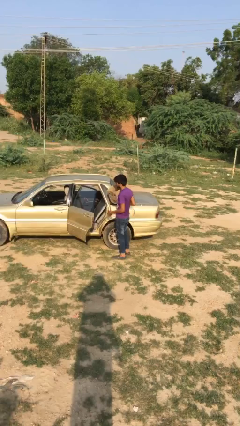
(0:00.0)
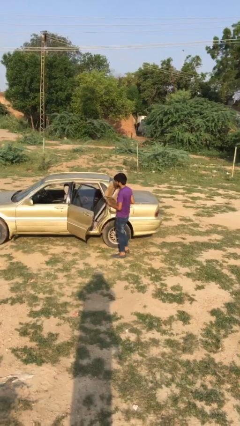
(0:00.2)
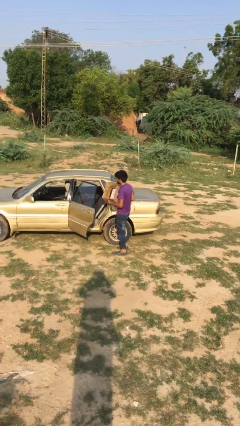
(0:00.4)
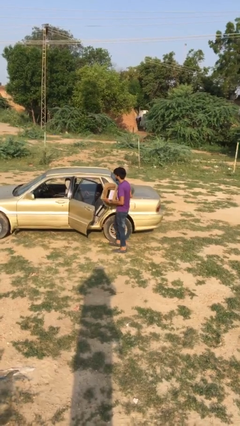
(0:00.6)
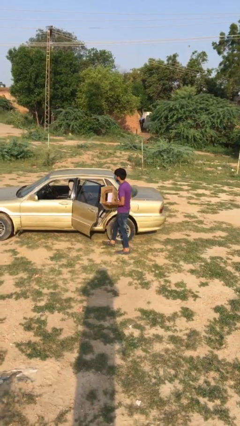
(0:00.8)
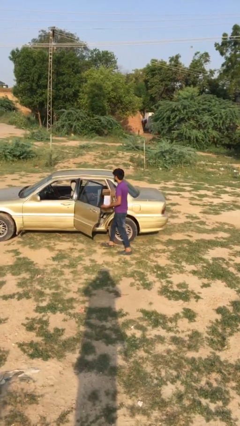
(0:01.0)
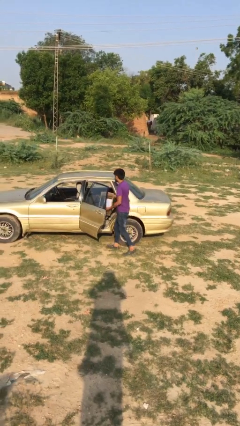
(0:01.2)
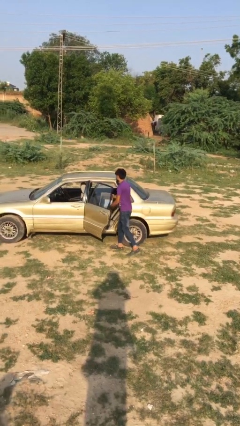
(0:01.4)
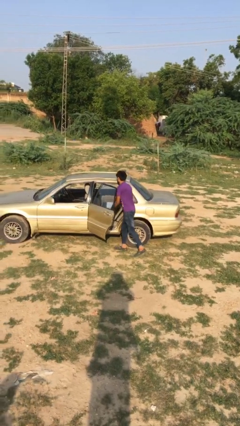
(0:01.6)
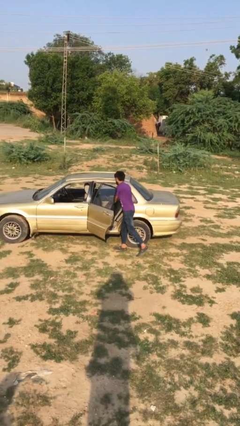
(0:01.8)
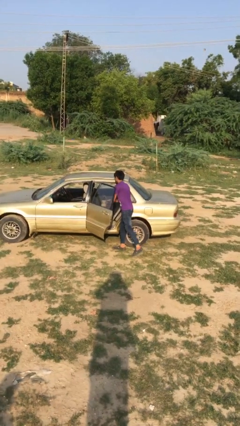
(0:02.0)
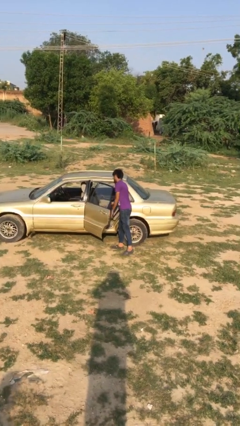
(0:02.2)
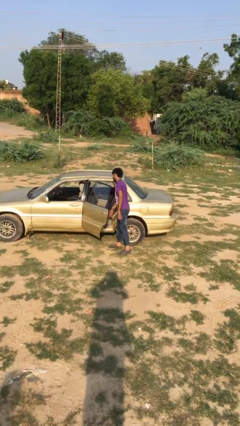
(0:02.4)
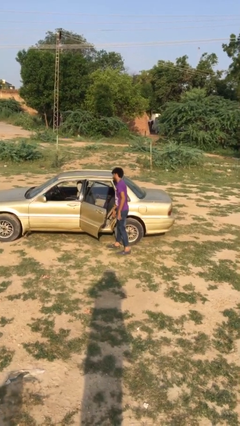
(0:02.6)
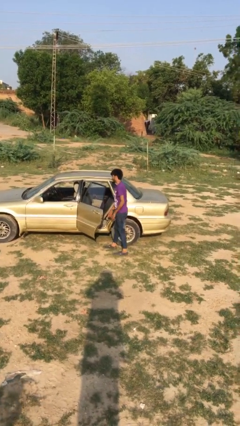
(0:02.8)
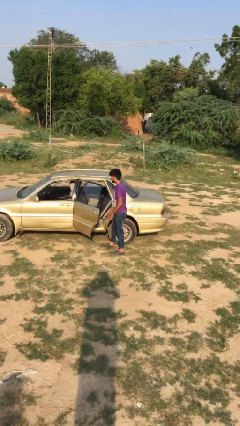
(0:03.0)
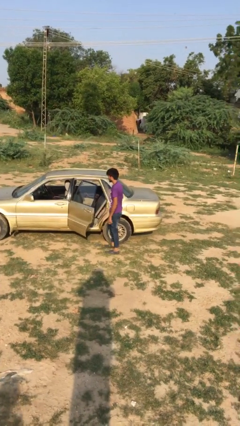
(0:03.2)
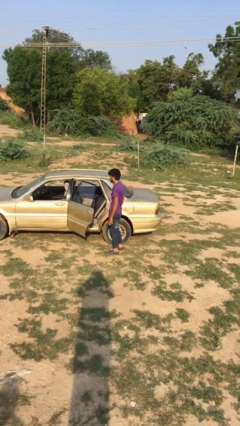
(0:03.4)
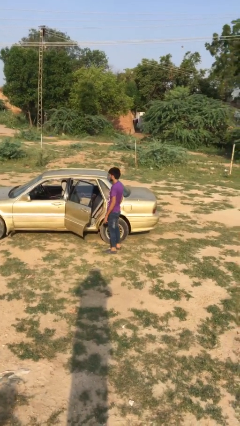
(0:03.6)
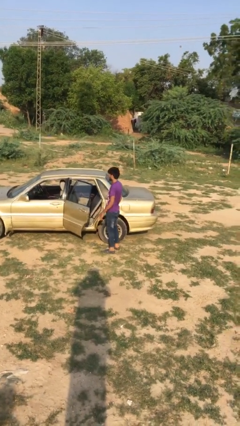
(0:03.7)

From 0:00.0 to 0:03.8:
person loads car

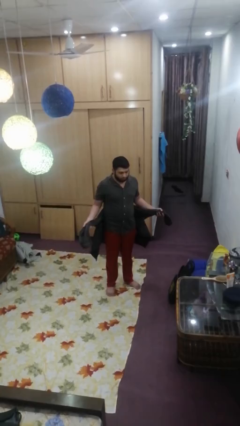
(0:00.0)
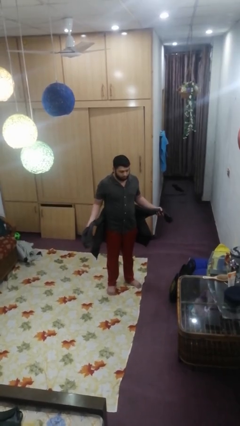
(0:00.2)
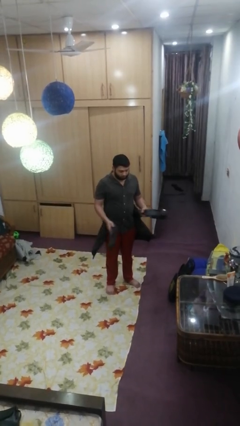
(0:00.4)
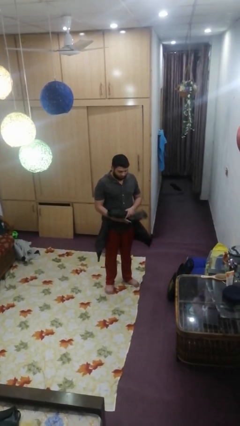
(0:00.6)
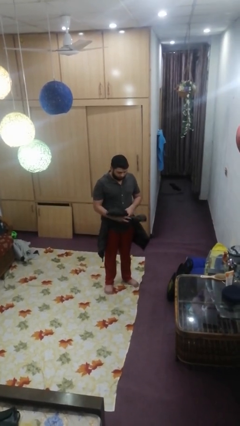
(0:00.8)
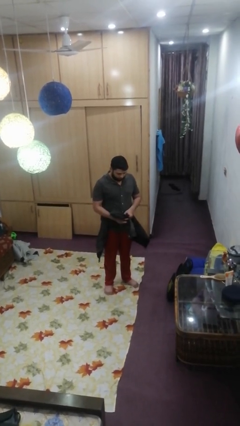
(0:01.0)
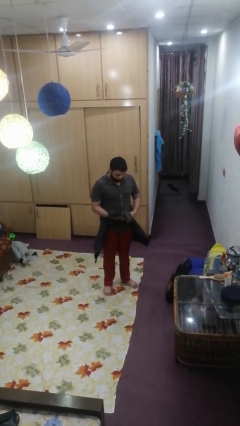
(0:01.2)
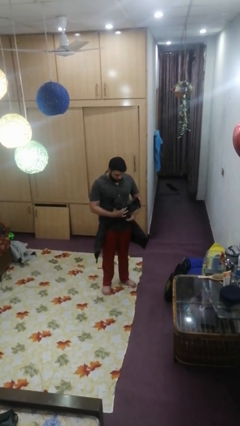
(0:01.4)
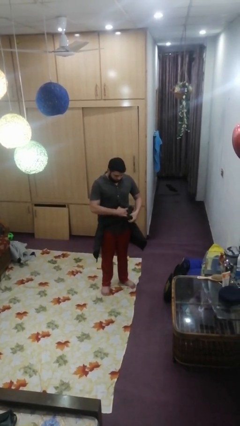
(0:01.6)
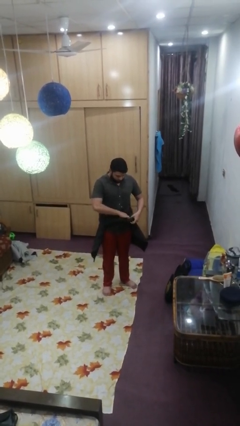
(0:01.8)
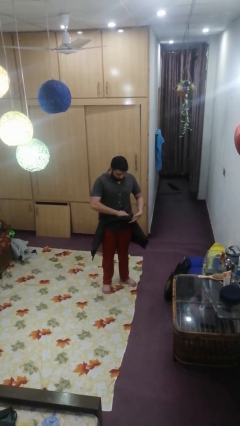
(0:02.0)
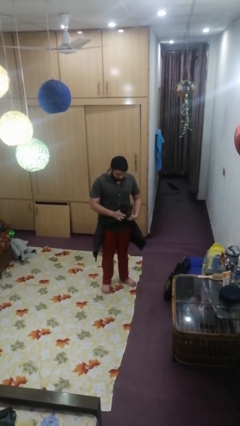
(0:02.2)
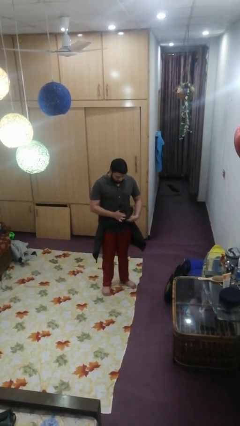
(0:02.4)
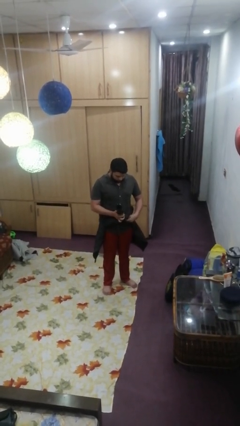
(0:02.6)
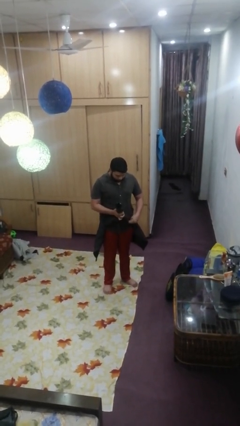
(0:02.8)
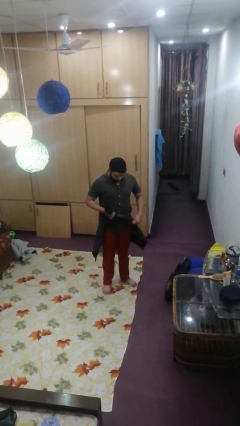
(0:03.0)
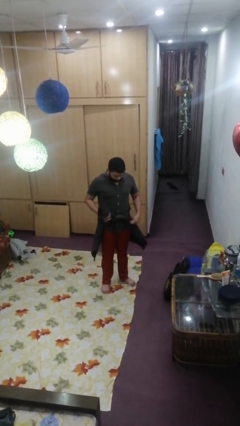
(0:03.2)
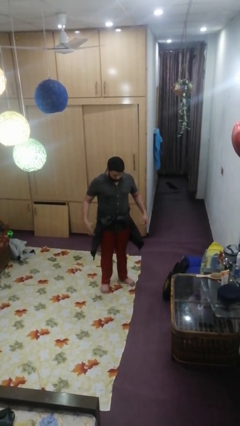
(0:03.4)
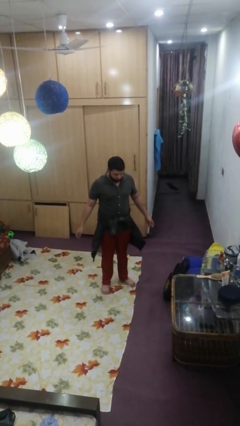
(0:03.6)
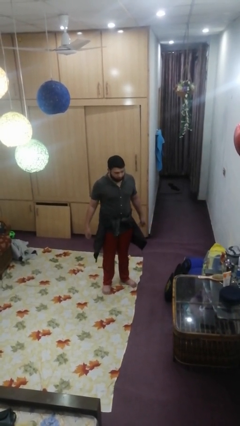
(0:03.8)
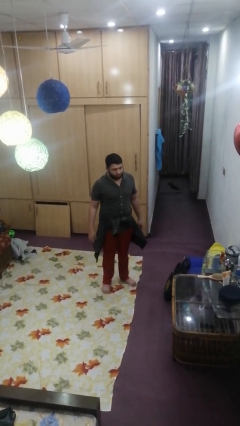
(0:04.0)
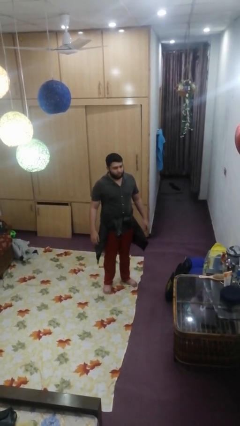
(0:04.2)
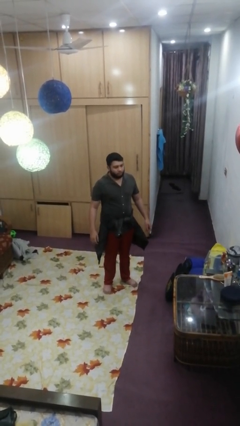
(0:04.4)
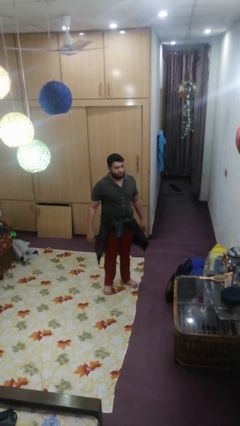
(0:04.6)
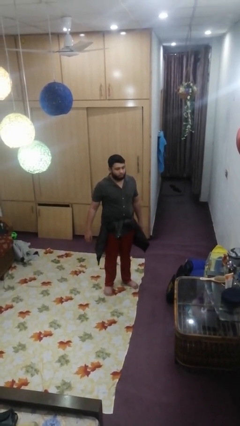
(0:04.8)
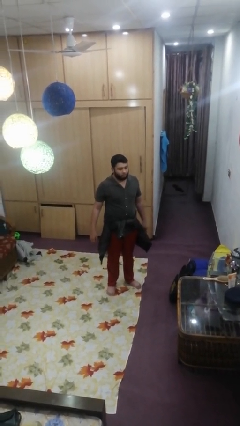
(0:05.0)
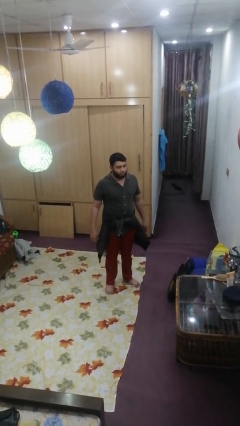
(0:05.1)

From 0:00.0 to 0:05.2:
person ties jacket around waist

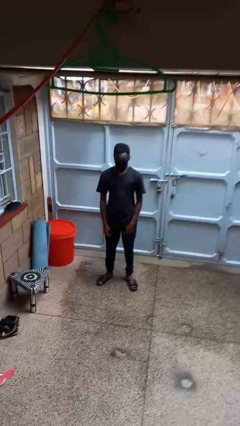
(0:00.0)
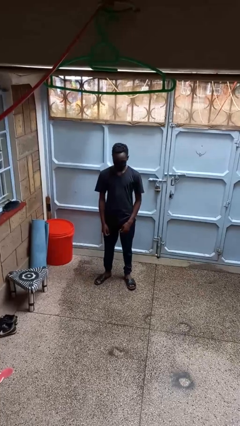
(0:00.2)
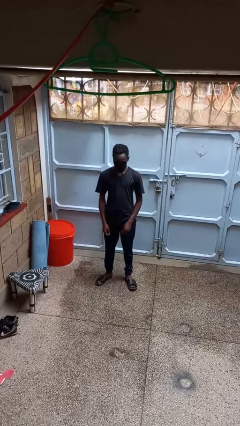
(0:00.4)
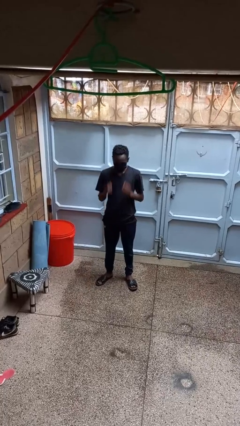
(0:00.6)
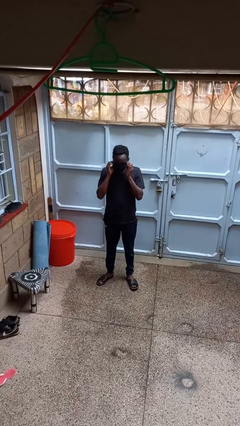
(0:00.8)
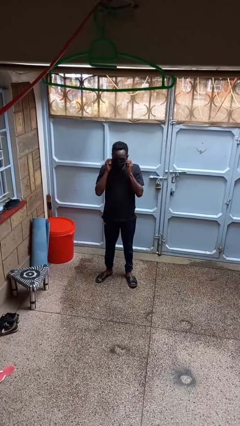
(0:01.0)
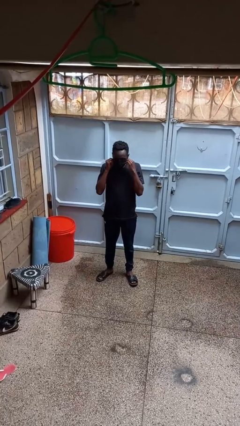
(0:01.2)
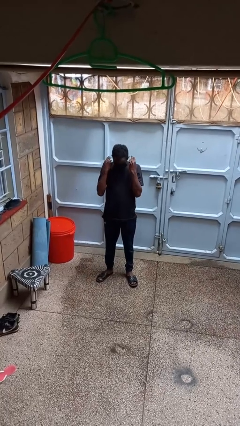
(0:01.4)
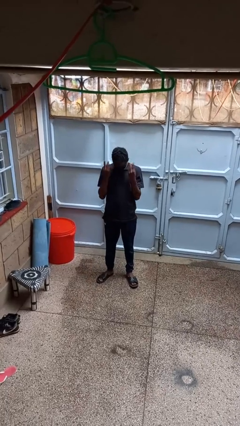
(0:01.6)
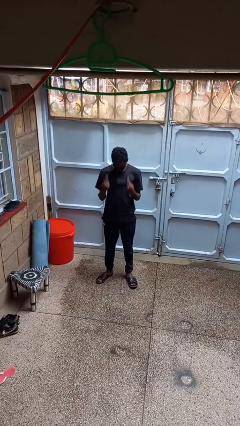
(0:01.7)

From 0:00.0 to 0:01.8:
person takes off facemask

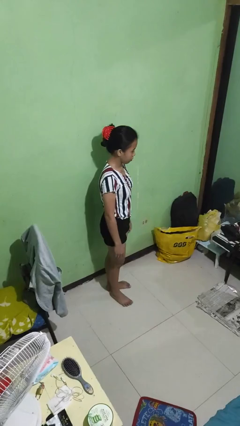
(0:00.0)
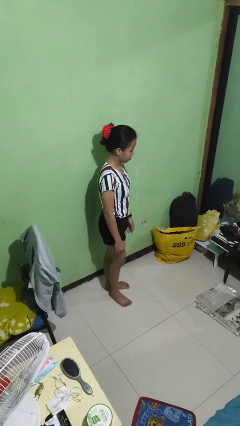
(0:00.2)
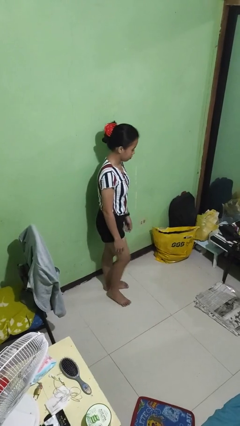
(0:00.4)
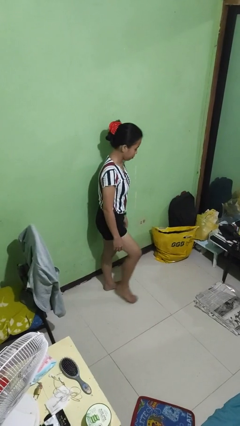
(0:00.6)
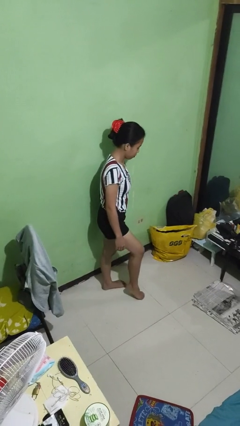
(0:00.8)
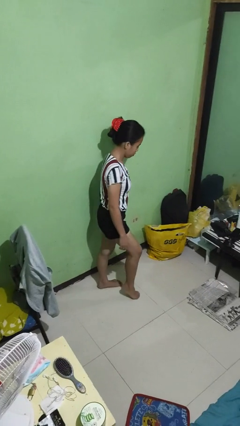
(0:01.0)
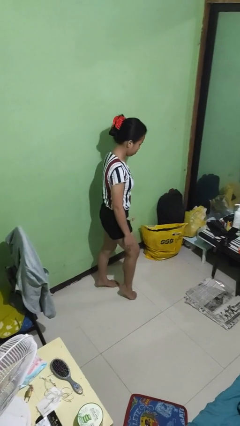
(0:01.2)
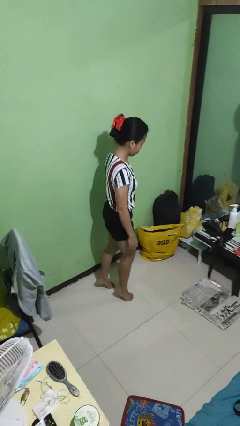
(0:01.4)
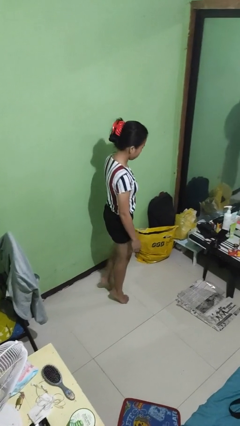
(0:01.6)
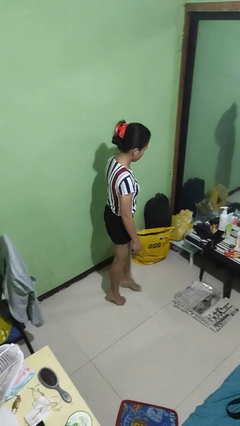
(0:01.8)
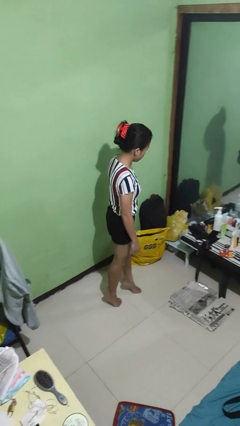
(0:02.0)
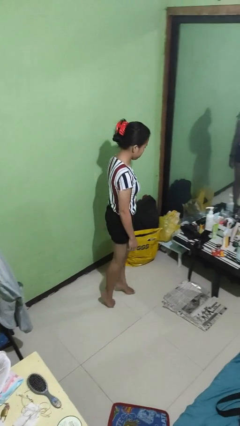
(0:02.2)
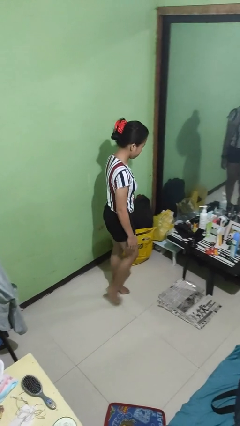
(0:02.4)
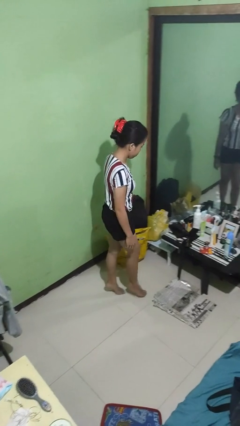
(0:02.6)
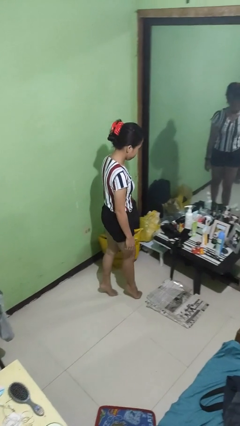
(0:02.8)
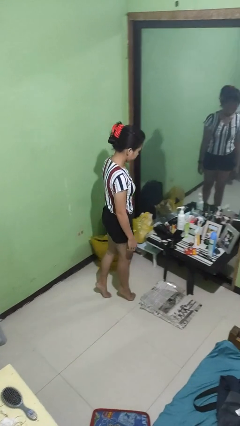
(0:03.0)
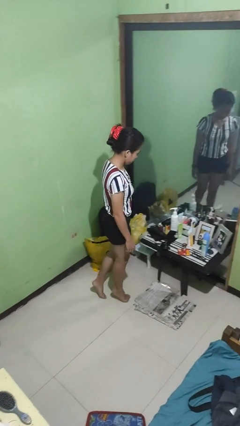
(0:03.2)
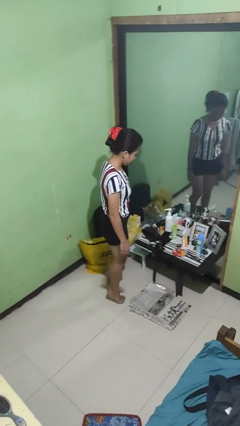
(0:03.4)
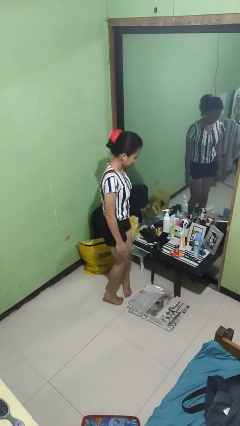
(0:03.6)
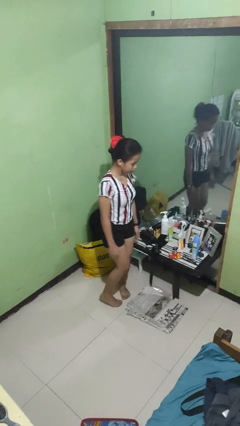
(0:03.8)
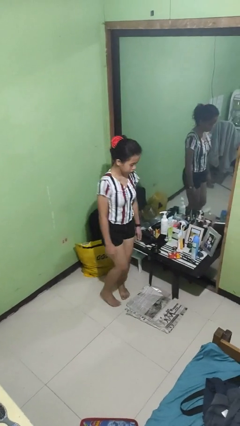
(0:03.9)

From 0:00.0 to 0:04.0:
person walks tiptoe

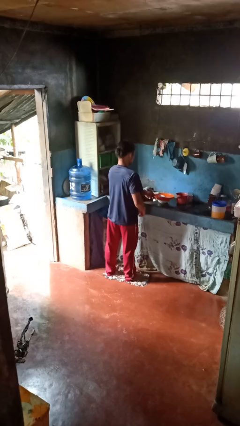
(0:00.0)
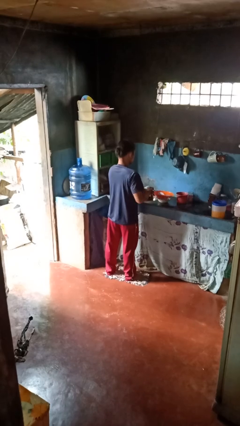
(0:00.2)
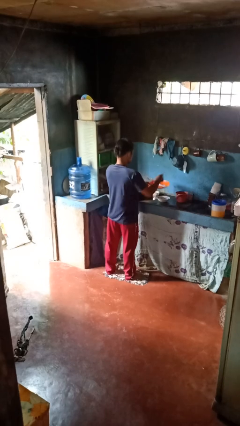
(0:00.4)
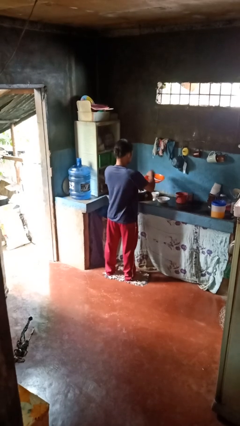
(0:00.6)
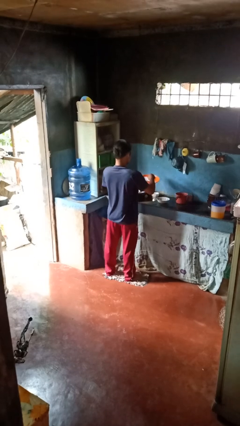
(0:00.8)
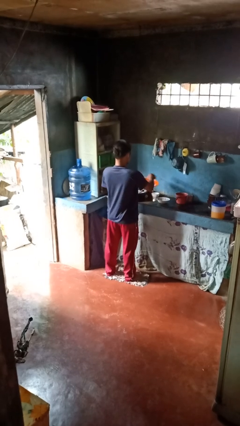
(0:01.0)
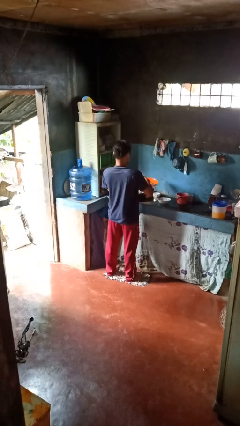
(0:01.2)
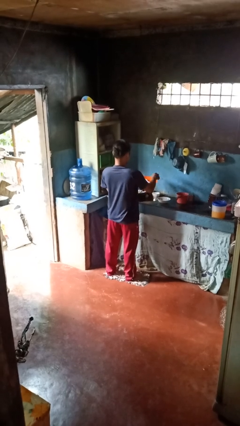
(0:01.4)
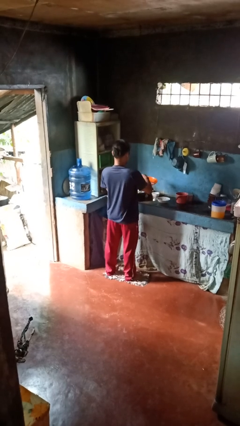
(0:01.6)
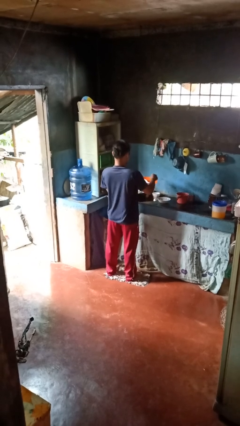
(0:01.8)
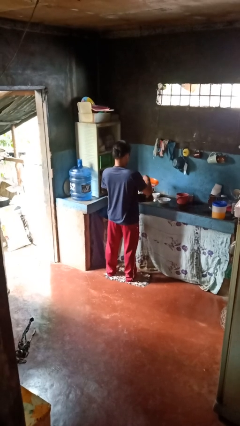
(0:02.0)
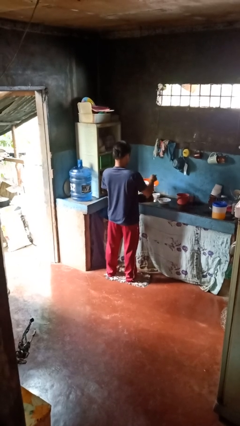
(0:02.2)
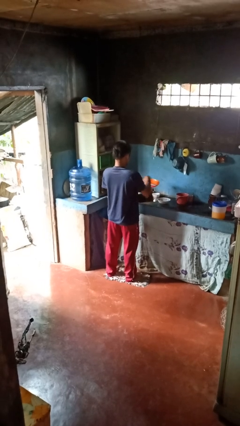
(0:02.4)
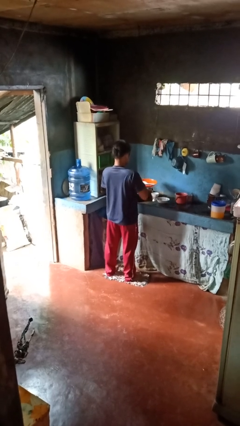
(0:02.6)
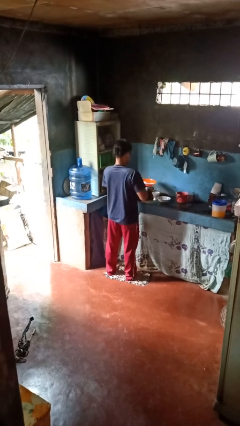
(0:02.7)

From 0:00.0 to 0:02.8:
person washes dish
